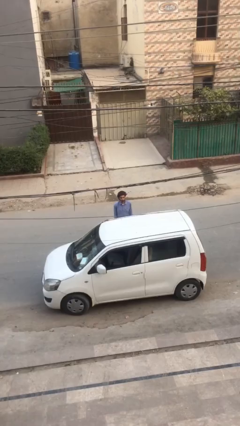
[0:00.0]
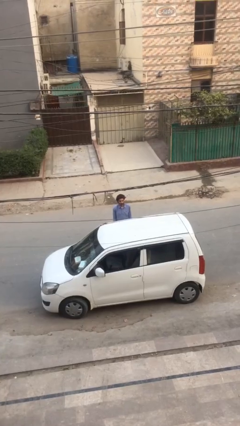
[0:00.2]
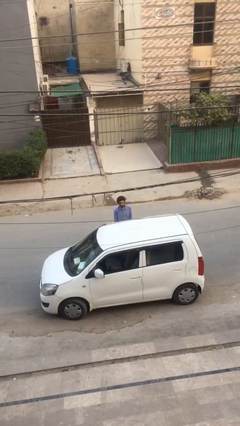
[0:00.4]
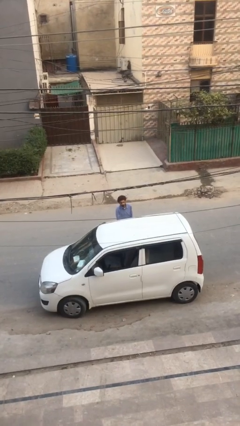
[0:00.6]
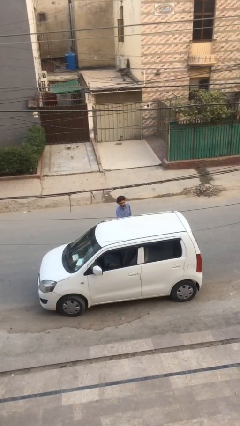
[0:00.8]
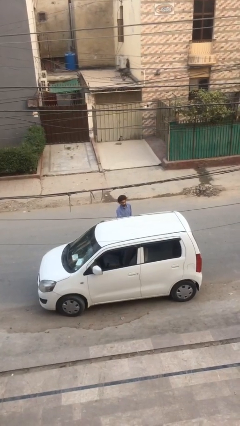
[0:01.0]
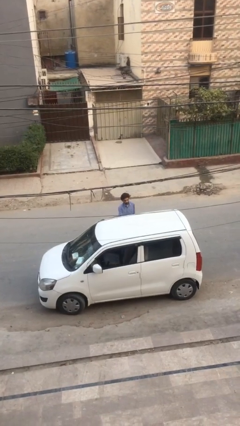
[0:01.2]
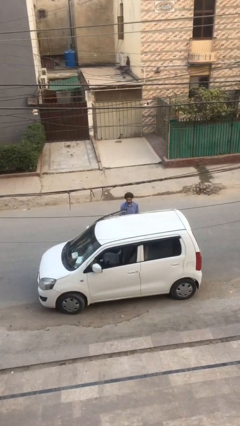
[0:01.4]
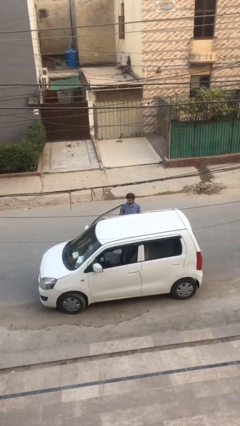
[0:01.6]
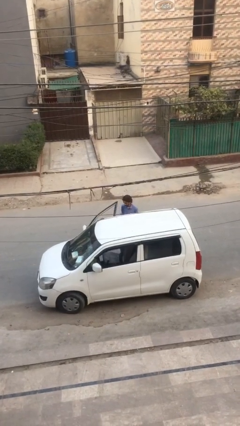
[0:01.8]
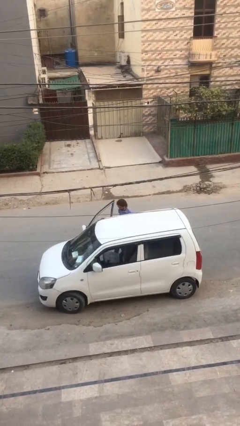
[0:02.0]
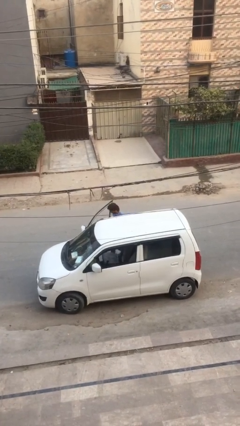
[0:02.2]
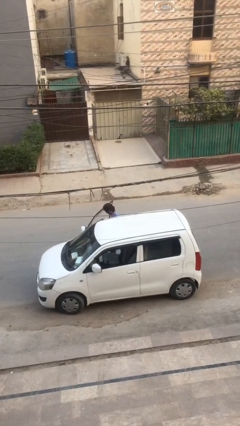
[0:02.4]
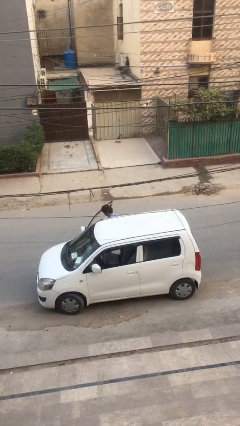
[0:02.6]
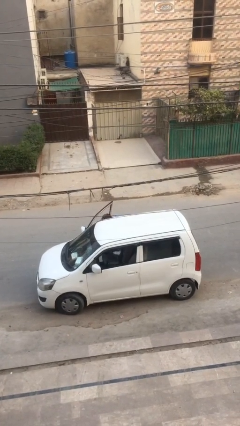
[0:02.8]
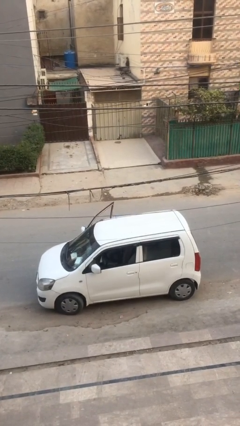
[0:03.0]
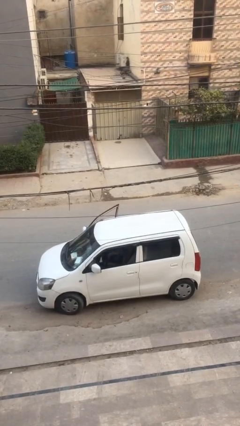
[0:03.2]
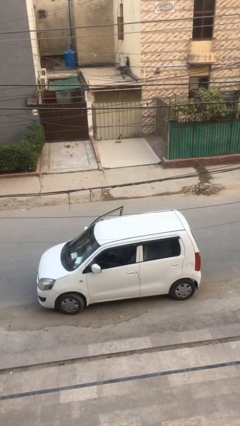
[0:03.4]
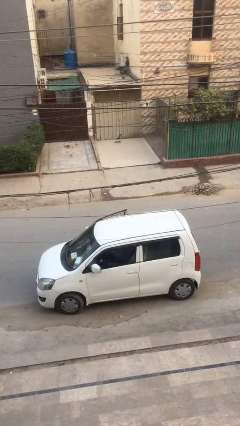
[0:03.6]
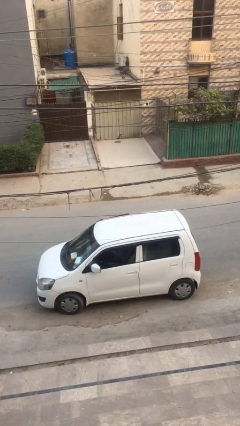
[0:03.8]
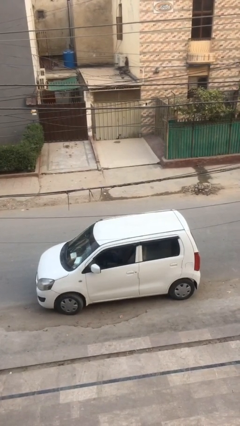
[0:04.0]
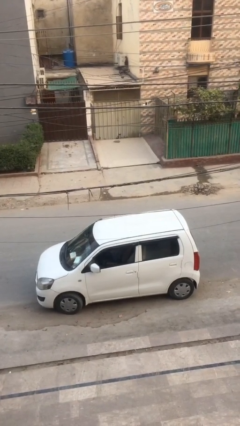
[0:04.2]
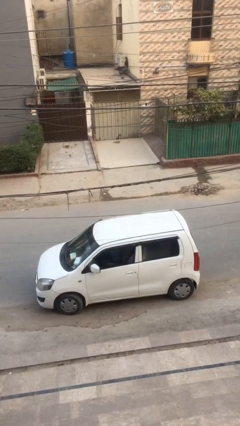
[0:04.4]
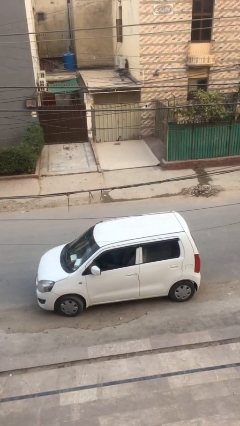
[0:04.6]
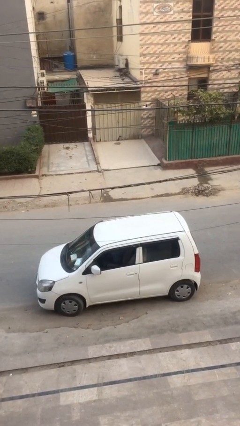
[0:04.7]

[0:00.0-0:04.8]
person enters car

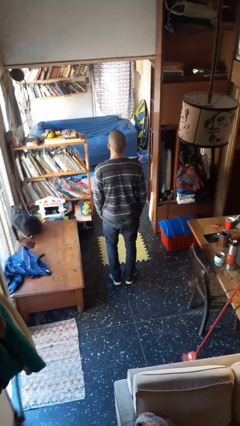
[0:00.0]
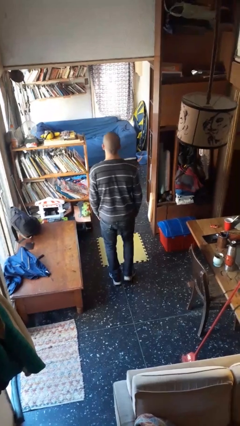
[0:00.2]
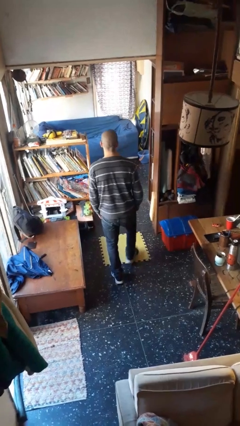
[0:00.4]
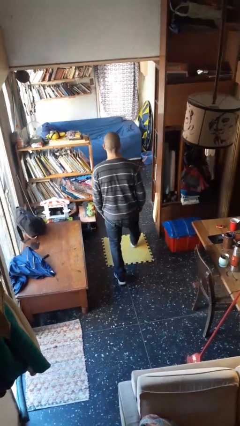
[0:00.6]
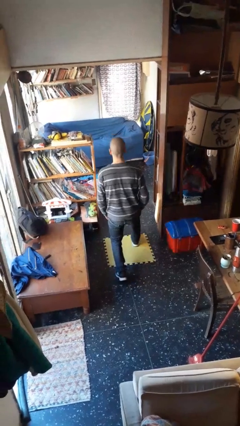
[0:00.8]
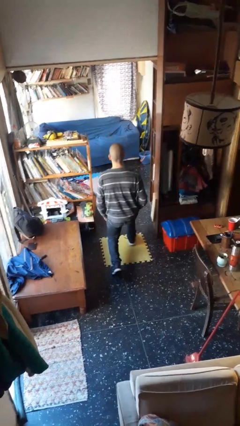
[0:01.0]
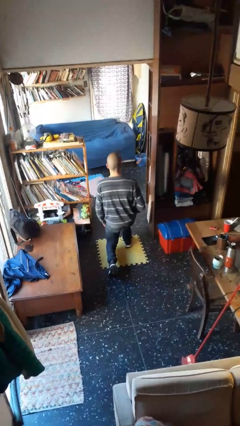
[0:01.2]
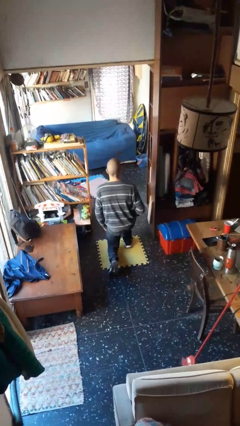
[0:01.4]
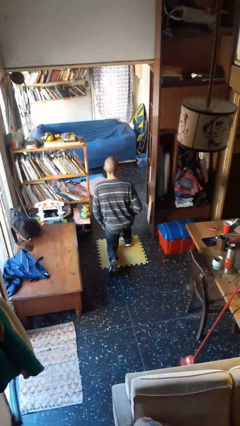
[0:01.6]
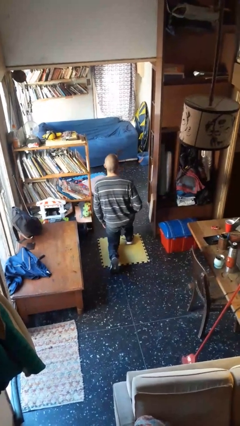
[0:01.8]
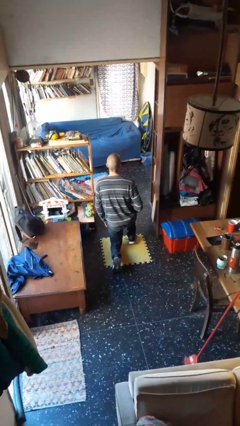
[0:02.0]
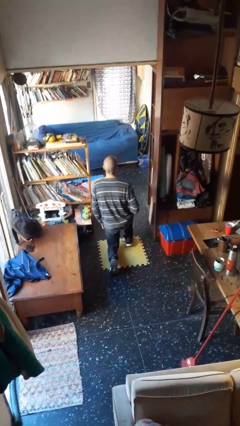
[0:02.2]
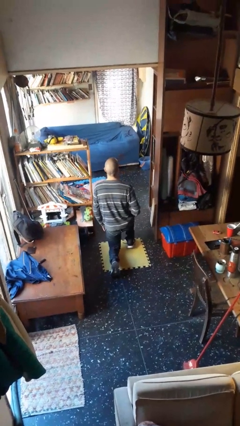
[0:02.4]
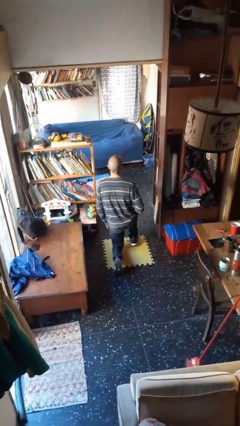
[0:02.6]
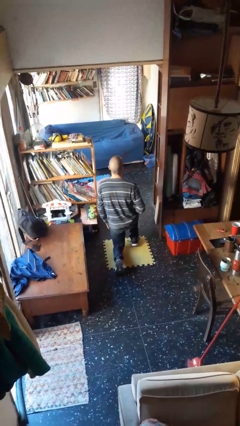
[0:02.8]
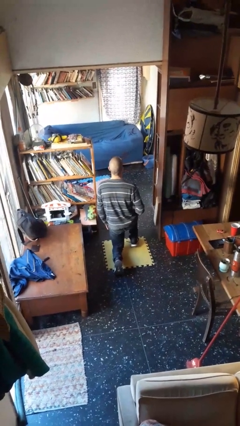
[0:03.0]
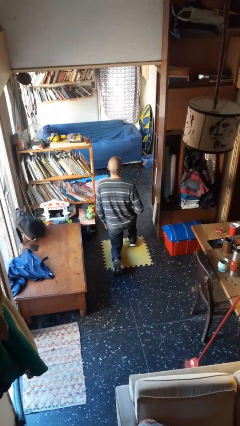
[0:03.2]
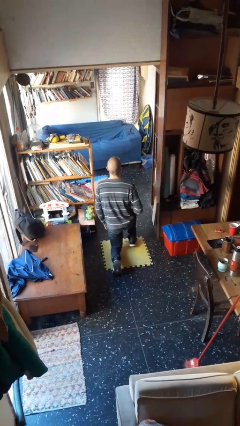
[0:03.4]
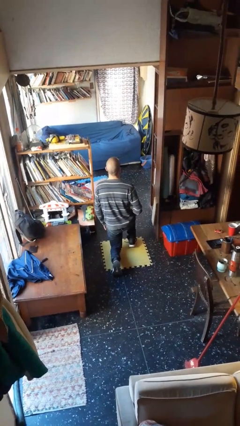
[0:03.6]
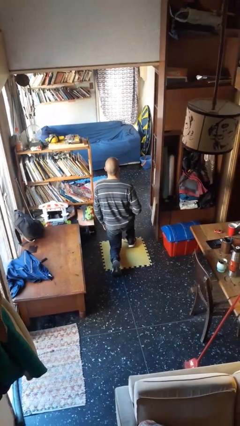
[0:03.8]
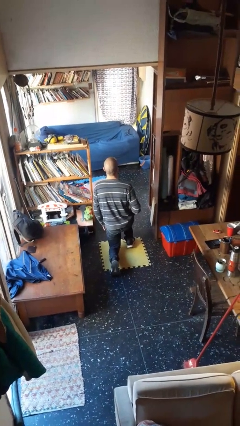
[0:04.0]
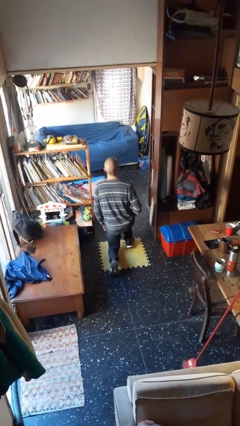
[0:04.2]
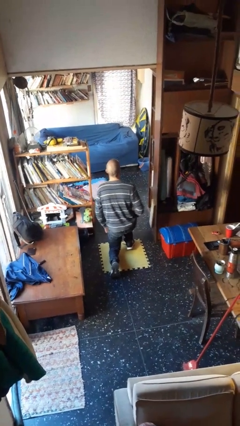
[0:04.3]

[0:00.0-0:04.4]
person kneels

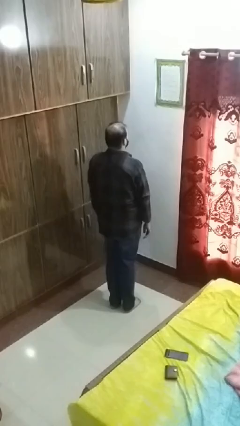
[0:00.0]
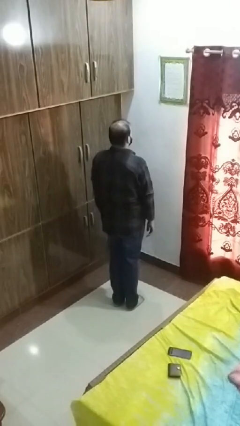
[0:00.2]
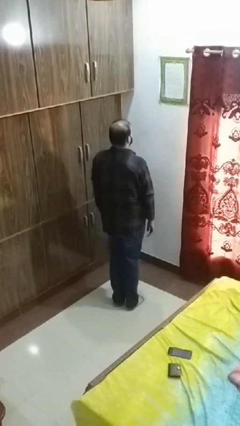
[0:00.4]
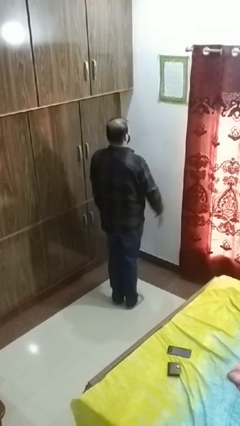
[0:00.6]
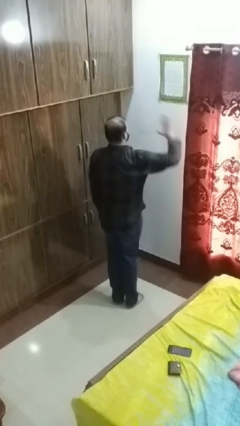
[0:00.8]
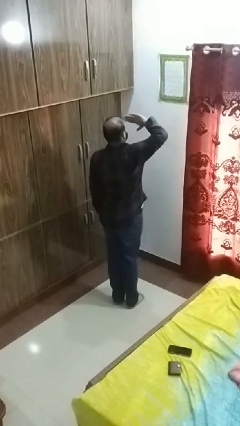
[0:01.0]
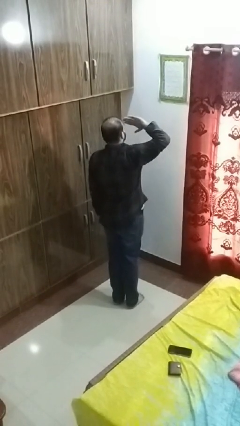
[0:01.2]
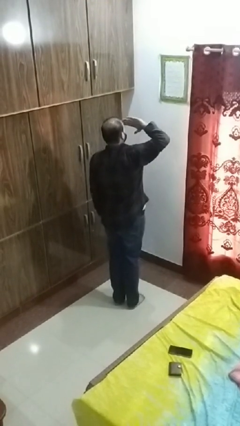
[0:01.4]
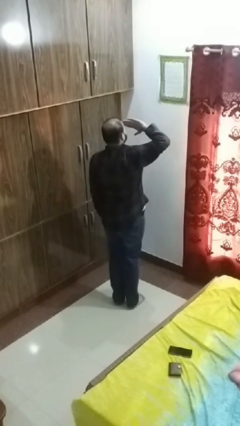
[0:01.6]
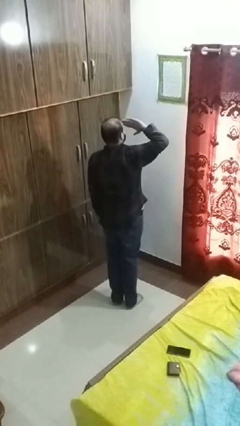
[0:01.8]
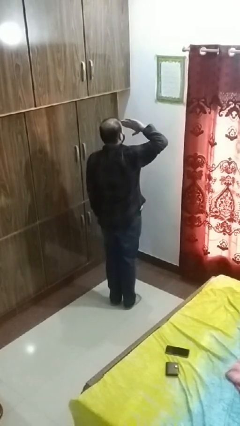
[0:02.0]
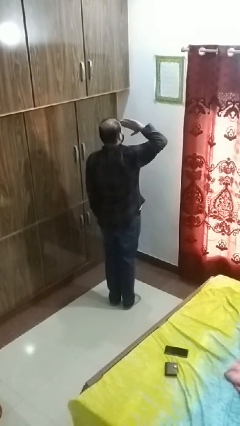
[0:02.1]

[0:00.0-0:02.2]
person salutes

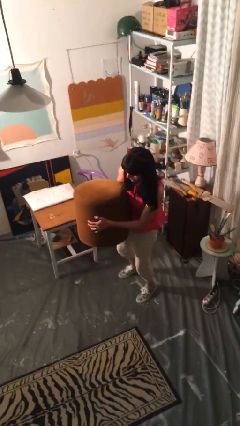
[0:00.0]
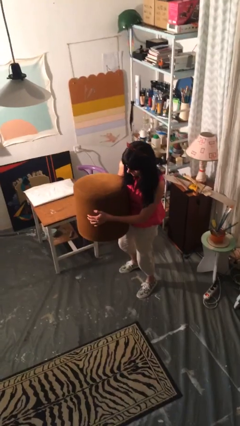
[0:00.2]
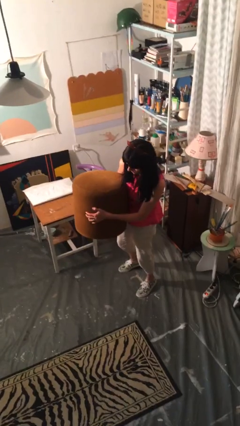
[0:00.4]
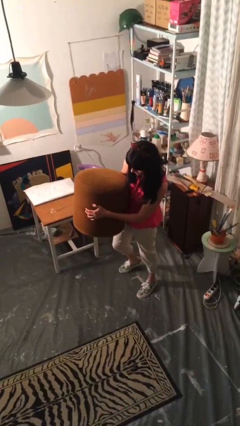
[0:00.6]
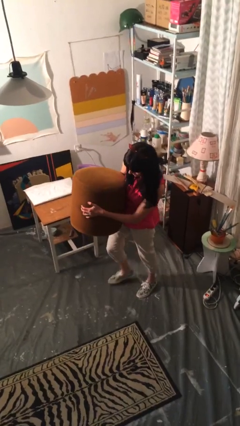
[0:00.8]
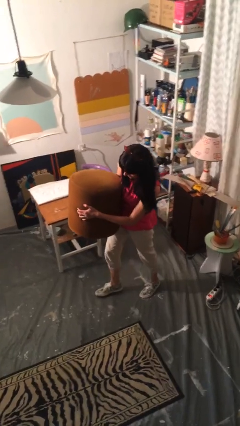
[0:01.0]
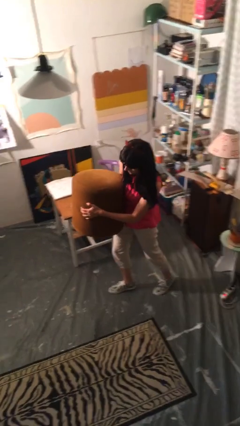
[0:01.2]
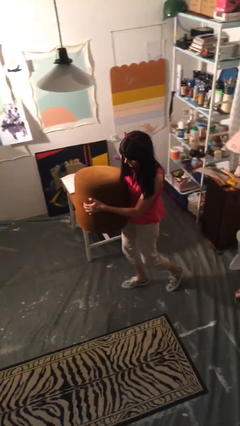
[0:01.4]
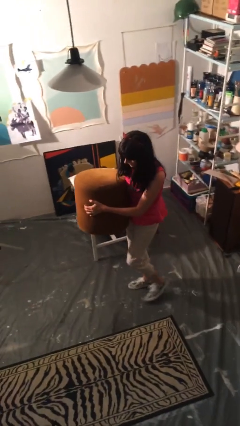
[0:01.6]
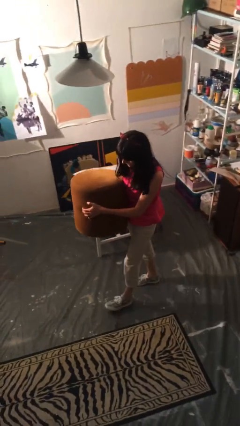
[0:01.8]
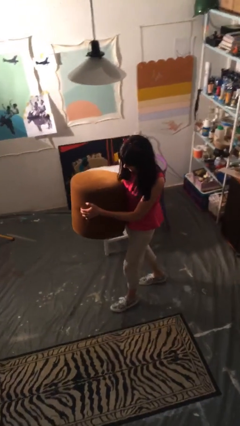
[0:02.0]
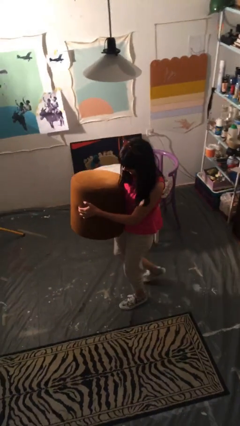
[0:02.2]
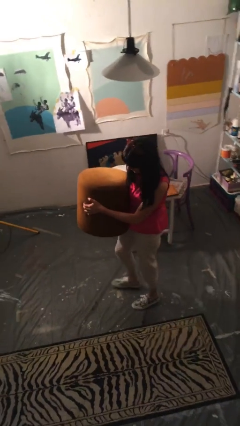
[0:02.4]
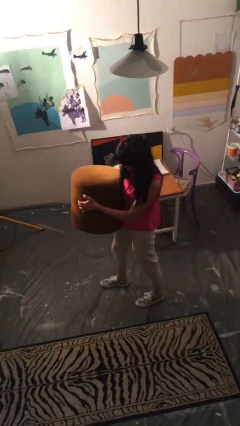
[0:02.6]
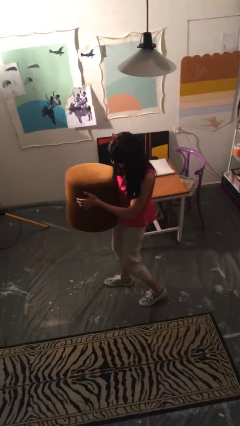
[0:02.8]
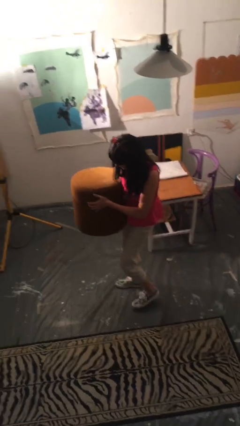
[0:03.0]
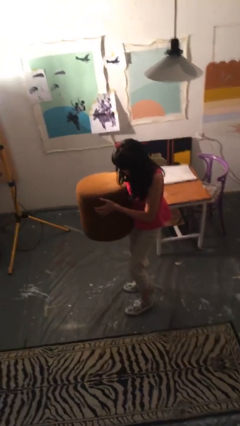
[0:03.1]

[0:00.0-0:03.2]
person carries heavy object

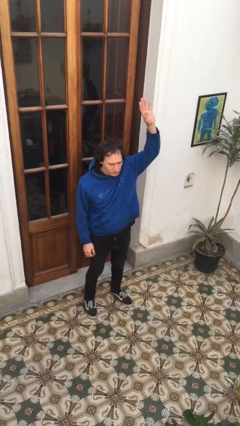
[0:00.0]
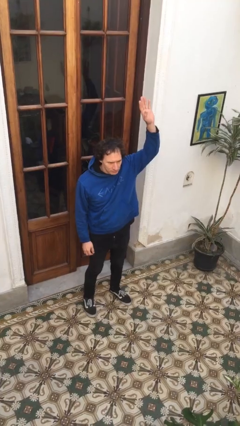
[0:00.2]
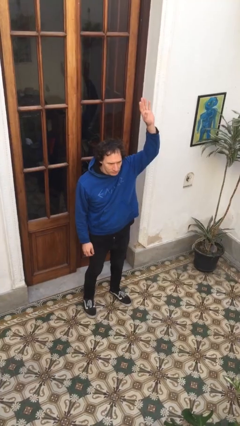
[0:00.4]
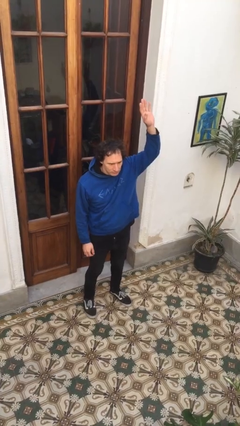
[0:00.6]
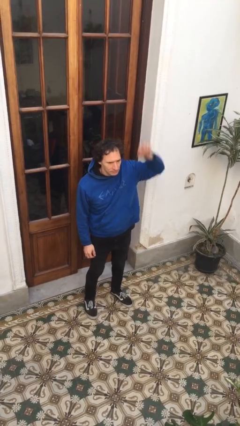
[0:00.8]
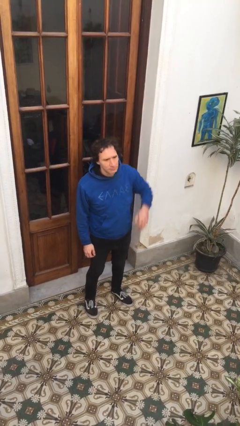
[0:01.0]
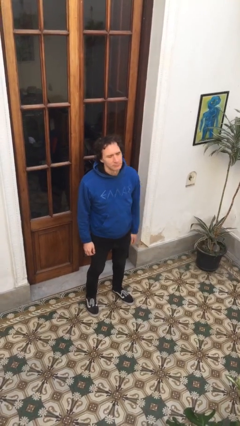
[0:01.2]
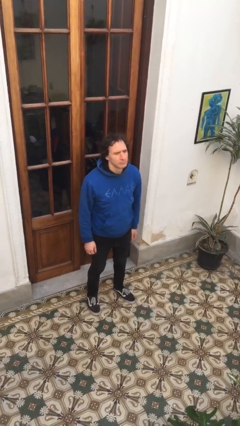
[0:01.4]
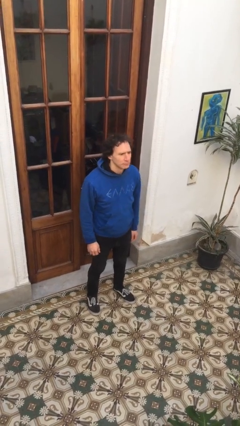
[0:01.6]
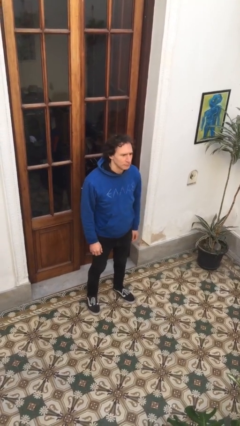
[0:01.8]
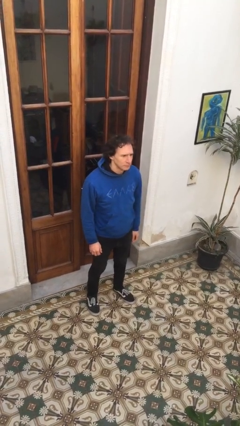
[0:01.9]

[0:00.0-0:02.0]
person gestures lower hand

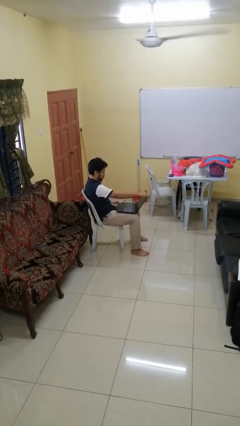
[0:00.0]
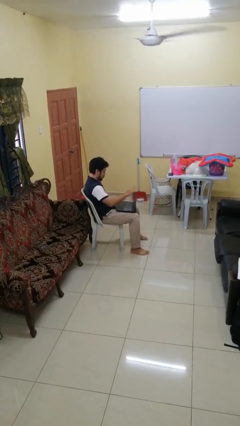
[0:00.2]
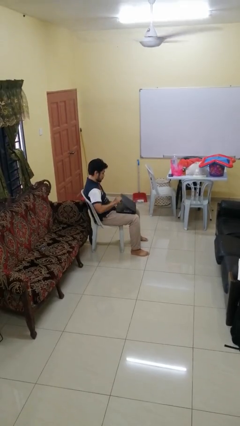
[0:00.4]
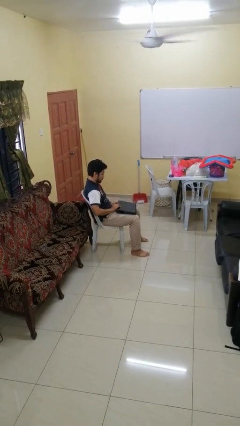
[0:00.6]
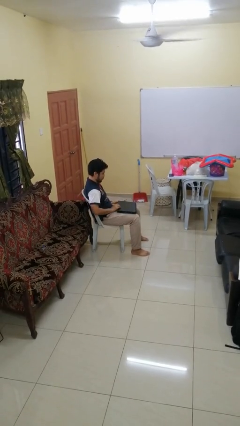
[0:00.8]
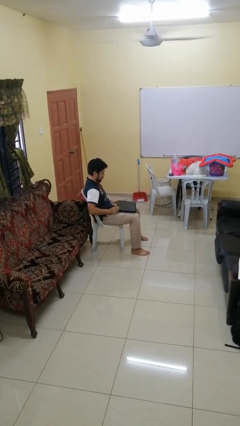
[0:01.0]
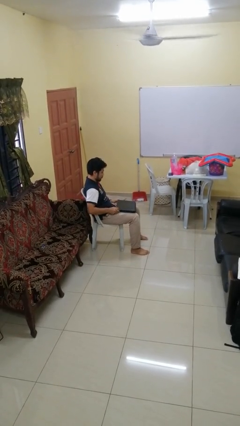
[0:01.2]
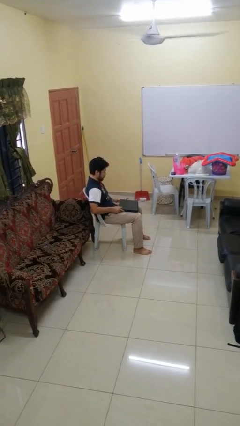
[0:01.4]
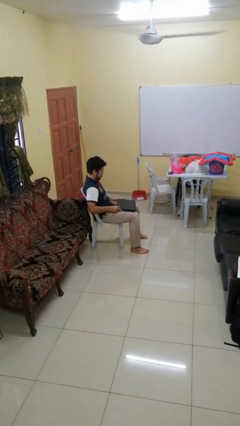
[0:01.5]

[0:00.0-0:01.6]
person closes laptop
